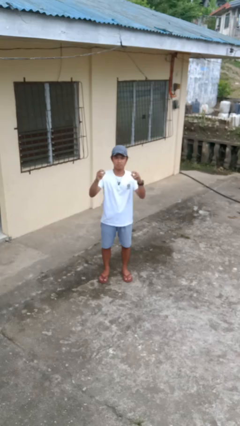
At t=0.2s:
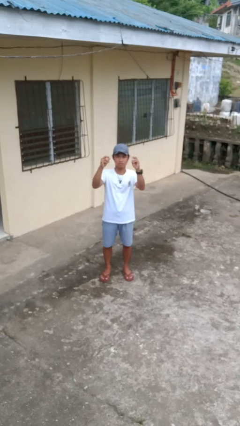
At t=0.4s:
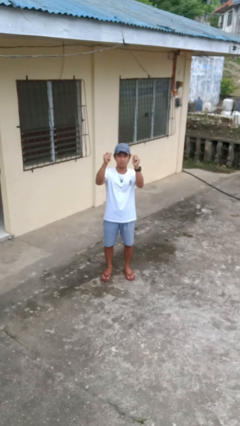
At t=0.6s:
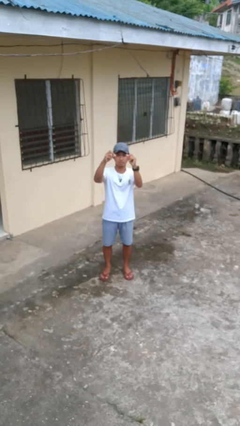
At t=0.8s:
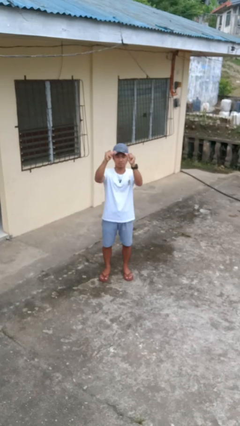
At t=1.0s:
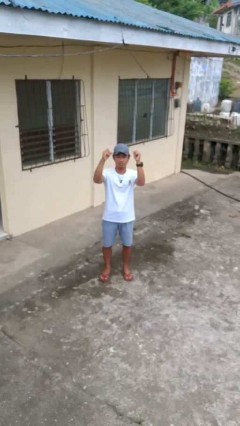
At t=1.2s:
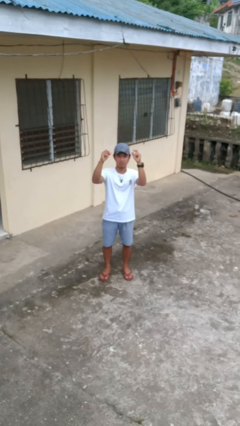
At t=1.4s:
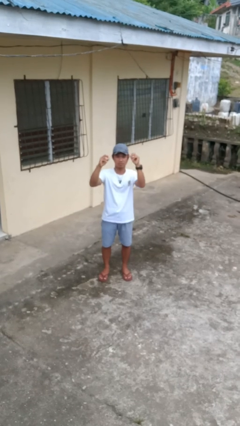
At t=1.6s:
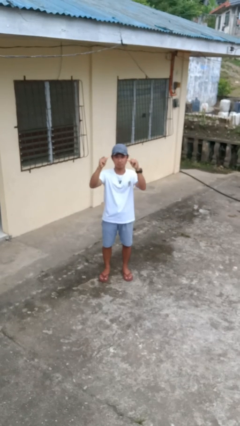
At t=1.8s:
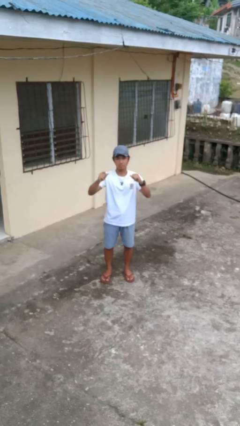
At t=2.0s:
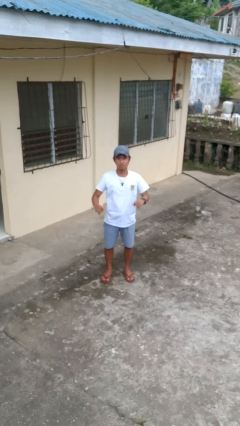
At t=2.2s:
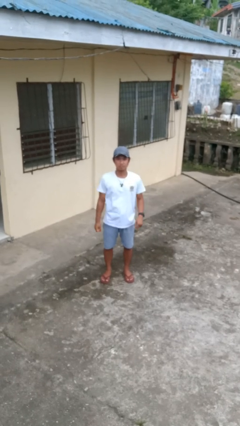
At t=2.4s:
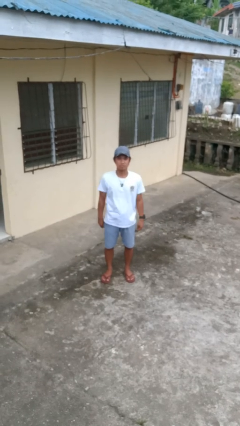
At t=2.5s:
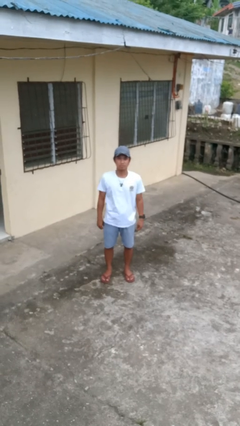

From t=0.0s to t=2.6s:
person snaps fingers

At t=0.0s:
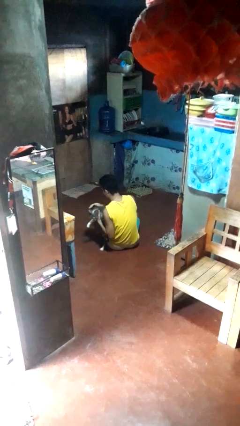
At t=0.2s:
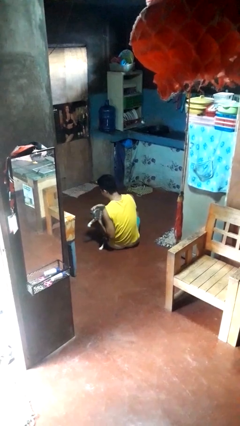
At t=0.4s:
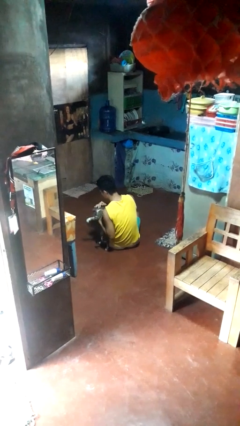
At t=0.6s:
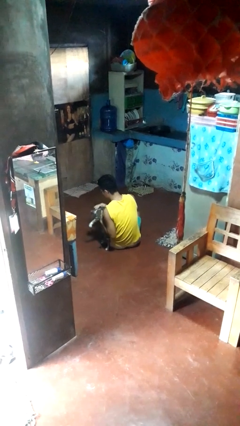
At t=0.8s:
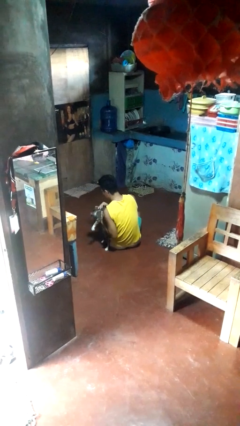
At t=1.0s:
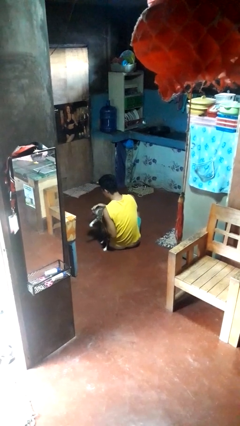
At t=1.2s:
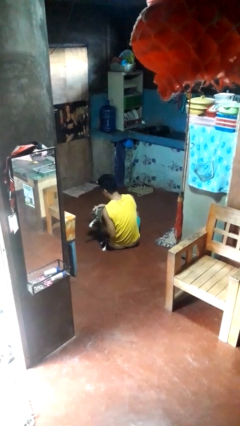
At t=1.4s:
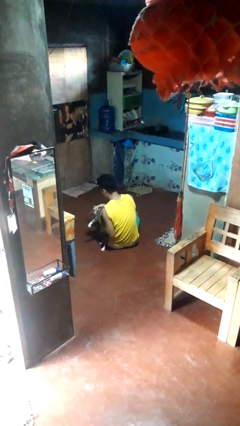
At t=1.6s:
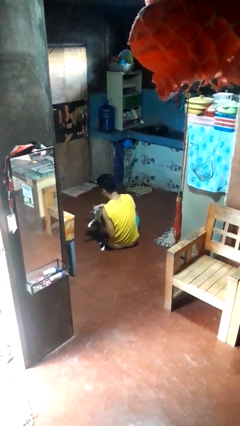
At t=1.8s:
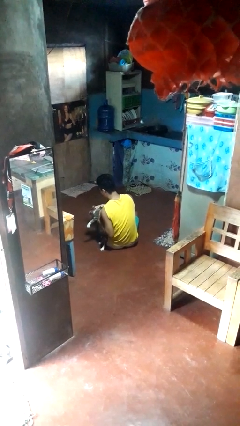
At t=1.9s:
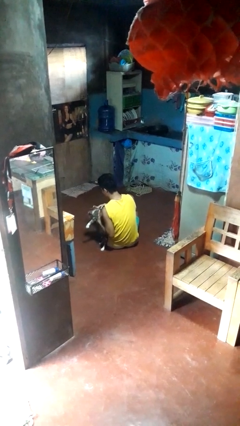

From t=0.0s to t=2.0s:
person hugs cat

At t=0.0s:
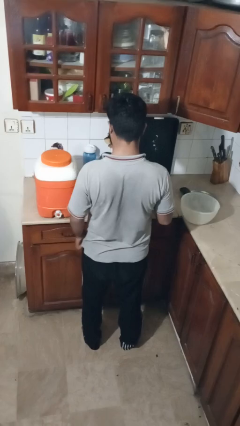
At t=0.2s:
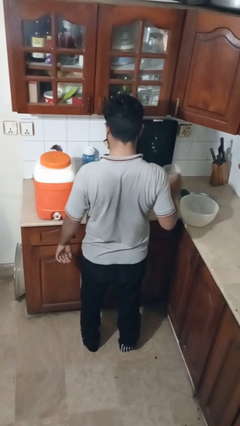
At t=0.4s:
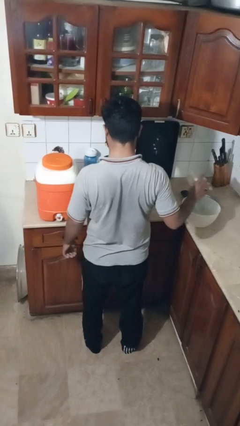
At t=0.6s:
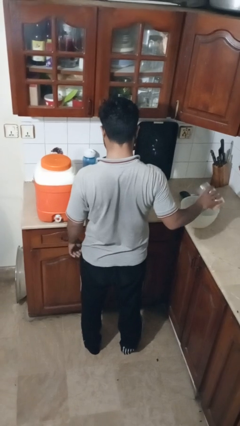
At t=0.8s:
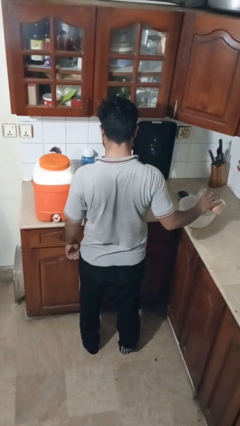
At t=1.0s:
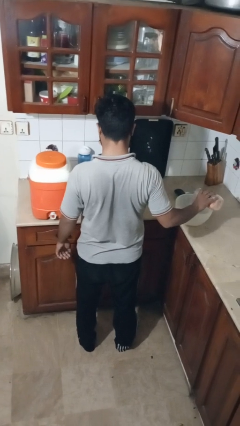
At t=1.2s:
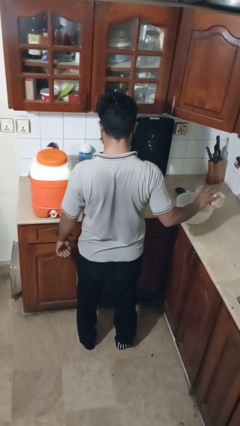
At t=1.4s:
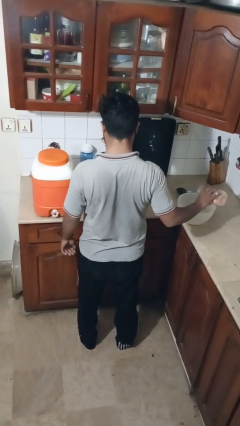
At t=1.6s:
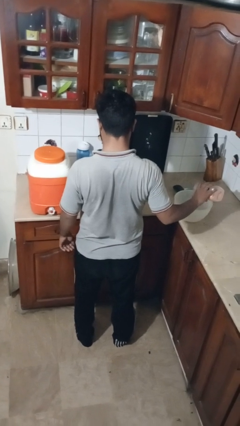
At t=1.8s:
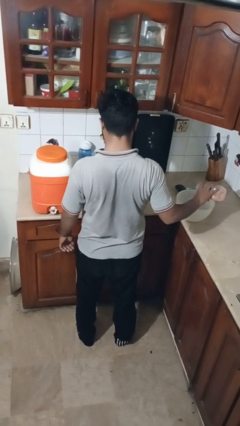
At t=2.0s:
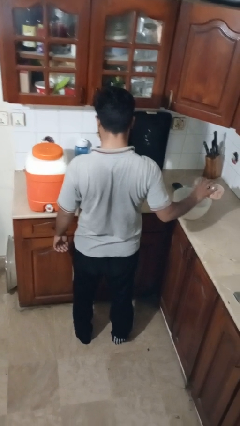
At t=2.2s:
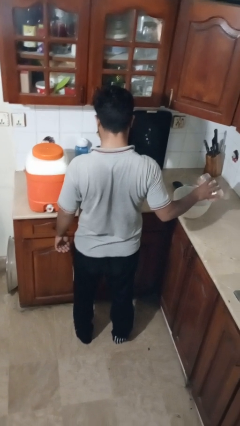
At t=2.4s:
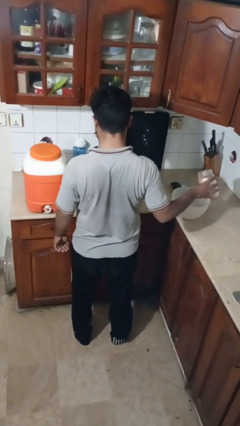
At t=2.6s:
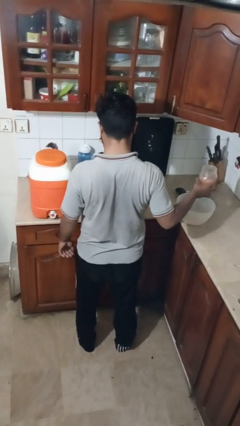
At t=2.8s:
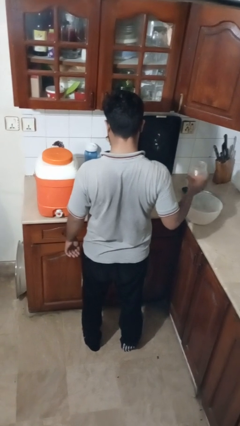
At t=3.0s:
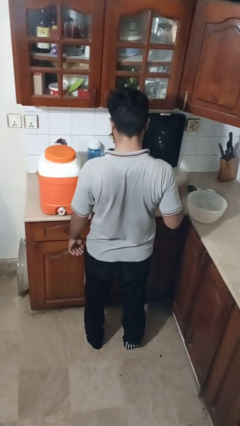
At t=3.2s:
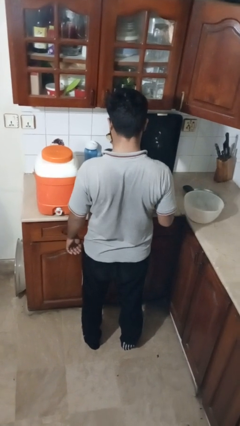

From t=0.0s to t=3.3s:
person pours into bowl

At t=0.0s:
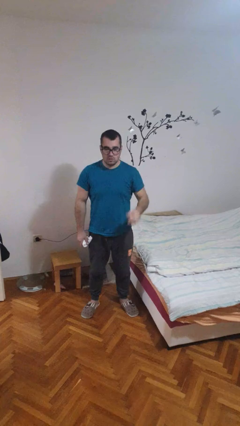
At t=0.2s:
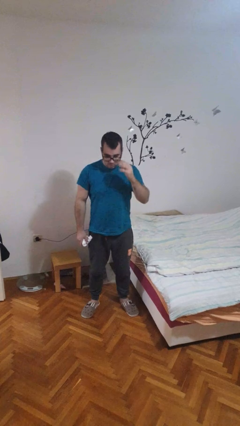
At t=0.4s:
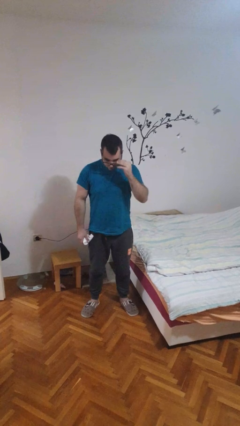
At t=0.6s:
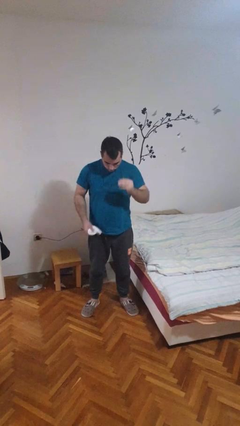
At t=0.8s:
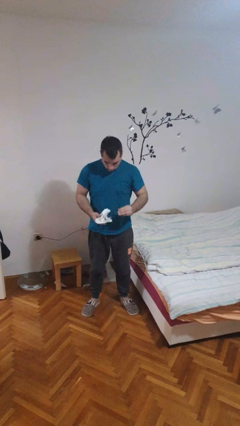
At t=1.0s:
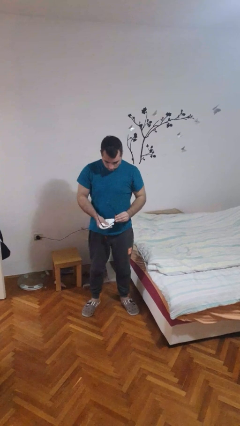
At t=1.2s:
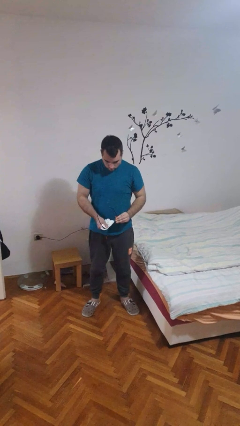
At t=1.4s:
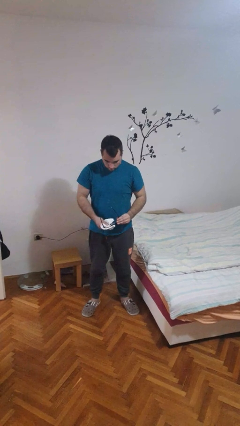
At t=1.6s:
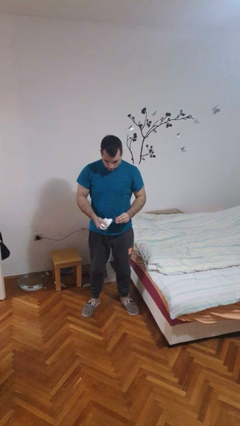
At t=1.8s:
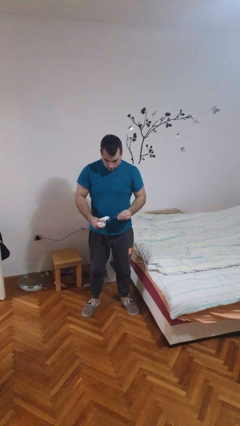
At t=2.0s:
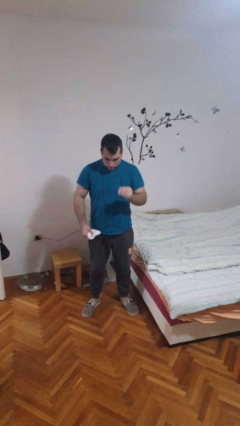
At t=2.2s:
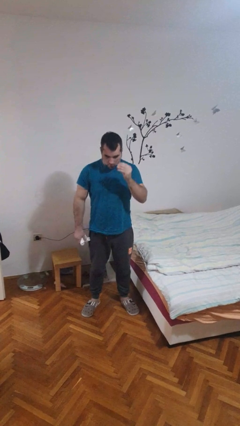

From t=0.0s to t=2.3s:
person cleans eyeglasses

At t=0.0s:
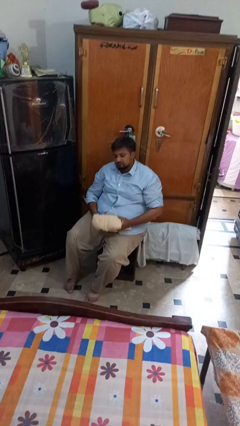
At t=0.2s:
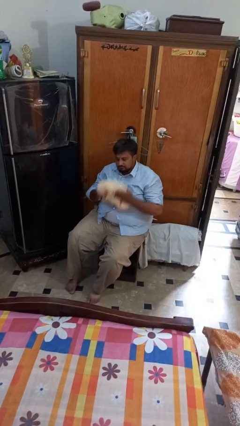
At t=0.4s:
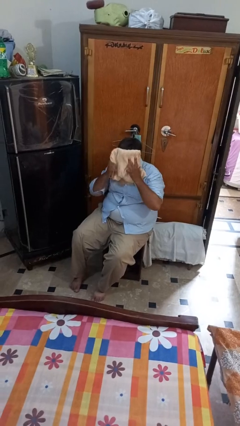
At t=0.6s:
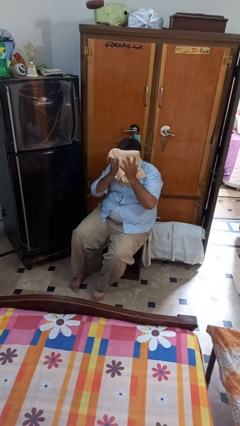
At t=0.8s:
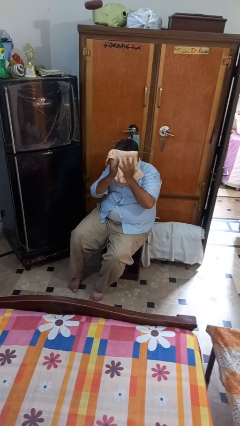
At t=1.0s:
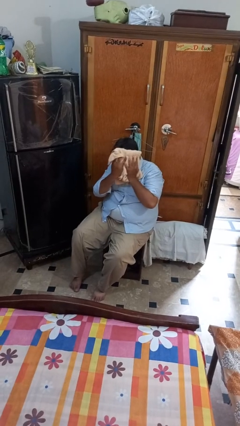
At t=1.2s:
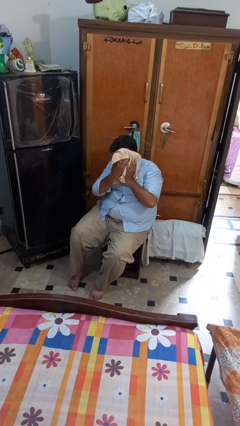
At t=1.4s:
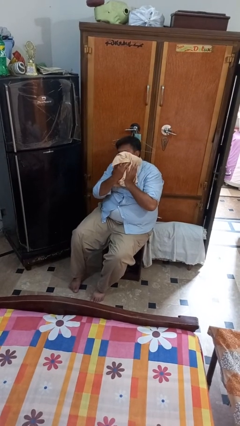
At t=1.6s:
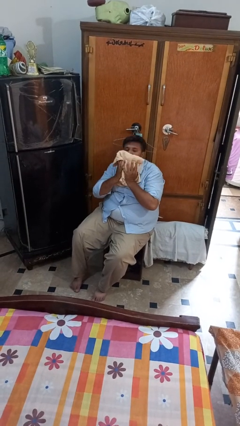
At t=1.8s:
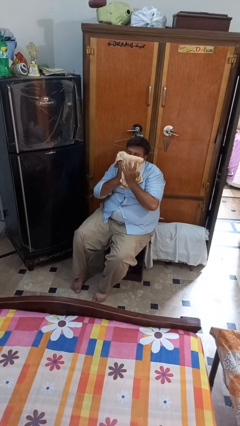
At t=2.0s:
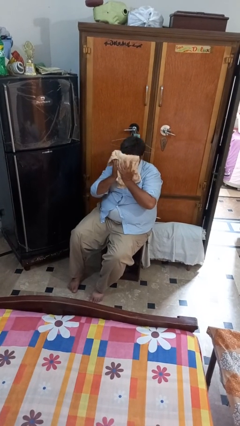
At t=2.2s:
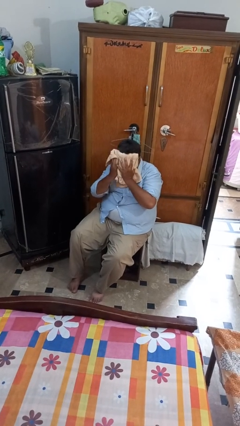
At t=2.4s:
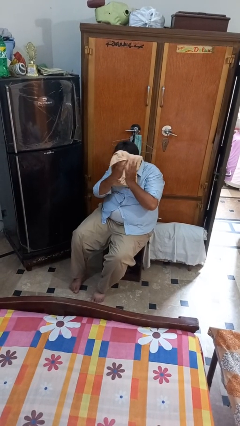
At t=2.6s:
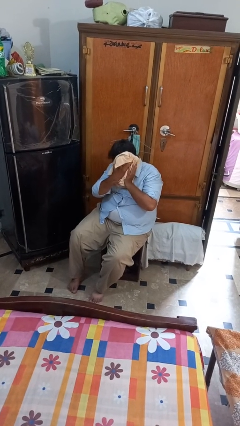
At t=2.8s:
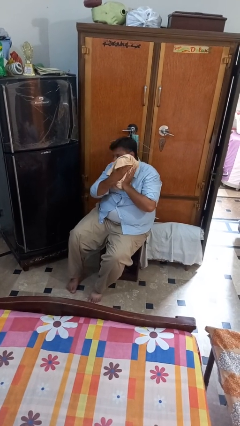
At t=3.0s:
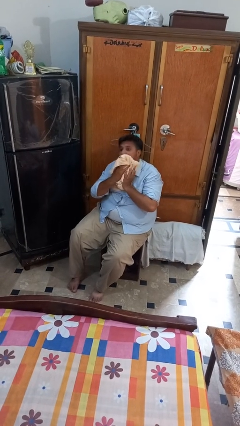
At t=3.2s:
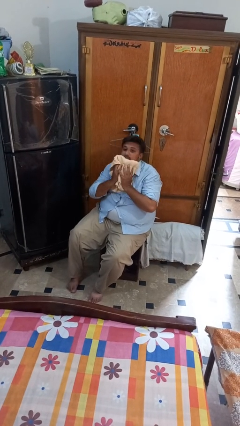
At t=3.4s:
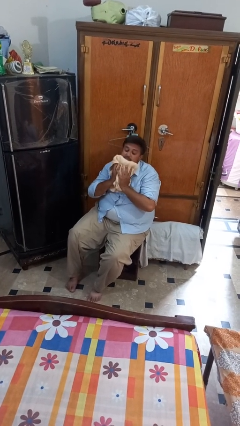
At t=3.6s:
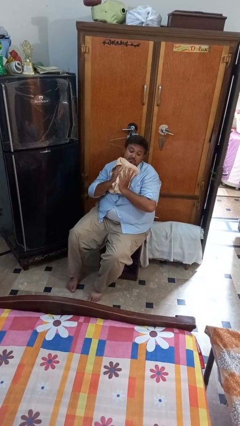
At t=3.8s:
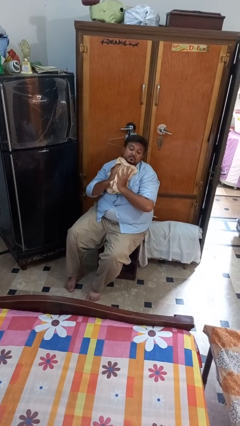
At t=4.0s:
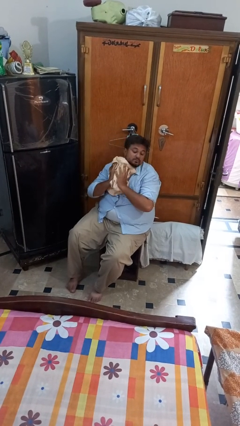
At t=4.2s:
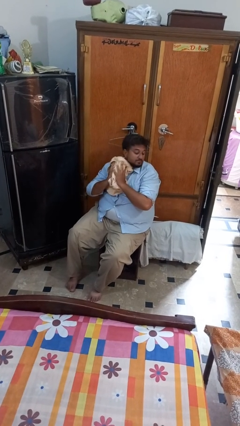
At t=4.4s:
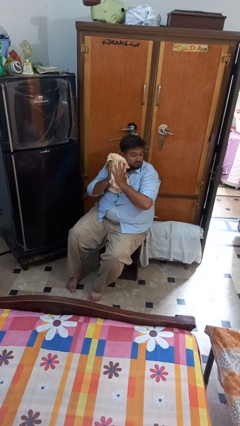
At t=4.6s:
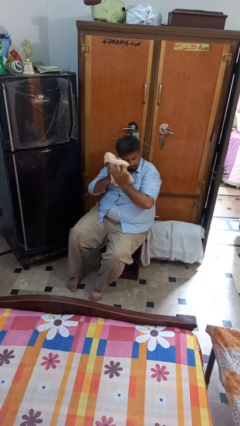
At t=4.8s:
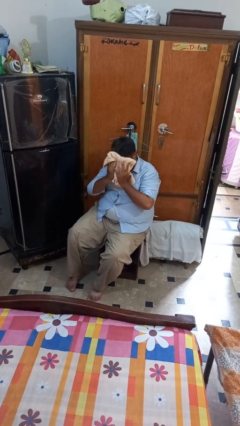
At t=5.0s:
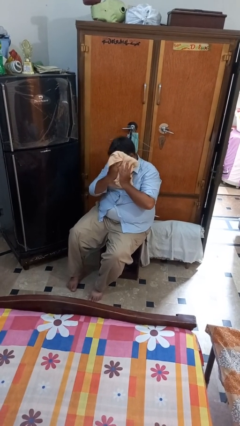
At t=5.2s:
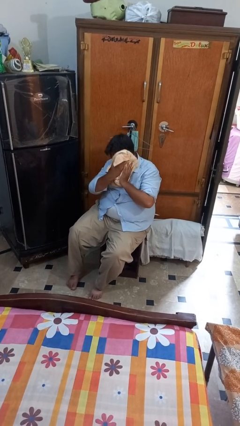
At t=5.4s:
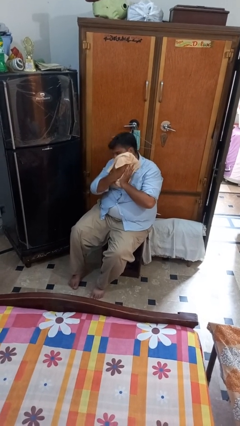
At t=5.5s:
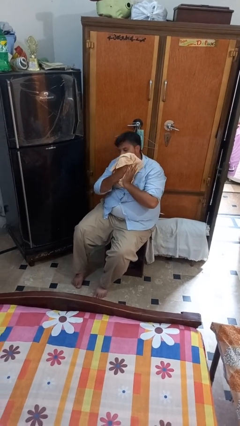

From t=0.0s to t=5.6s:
person wipes mouth with napkin

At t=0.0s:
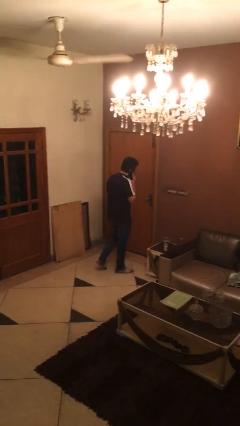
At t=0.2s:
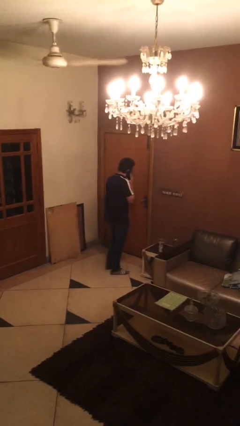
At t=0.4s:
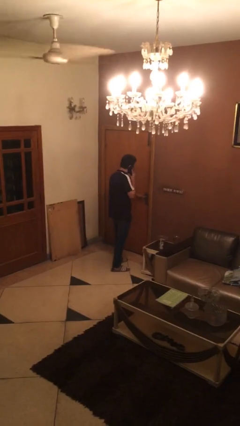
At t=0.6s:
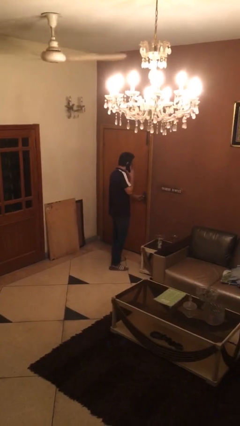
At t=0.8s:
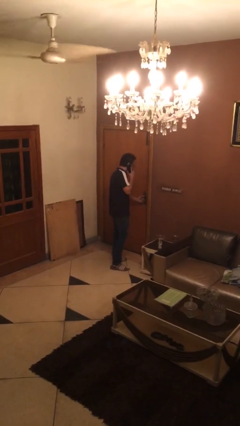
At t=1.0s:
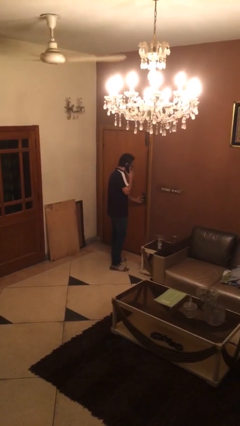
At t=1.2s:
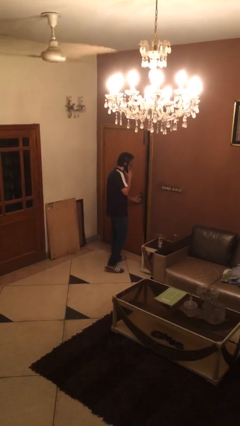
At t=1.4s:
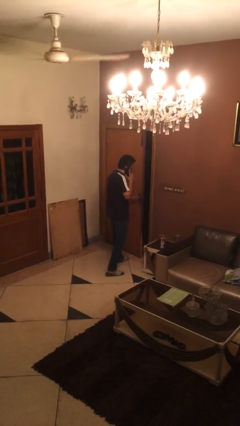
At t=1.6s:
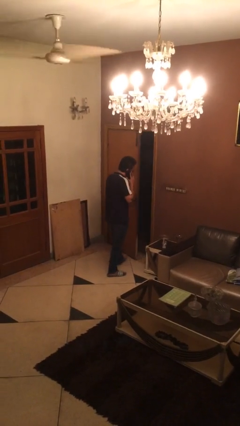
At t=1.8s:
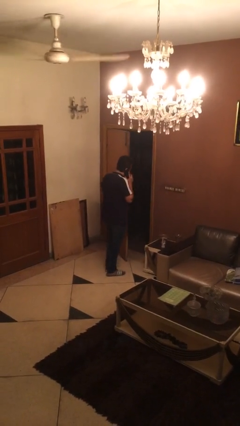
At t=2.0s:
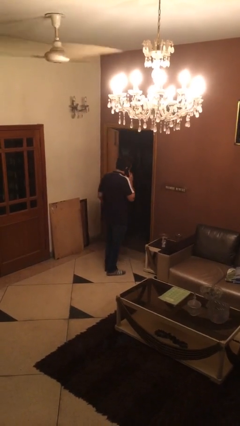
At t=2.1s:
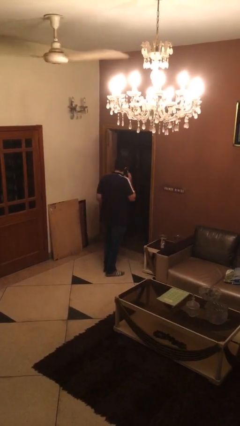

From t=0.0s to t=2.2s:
person opens facility door
